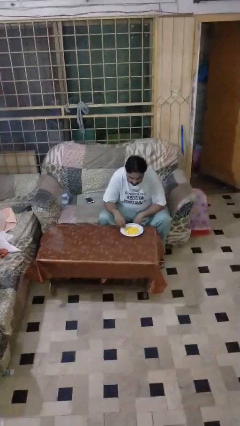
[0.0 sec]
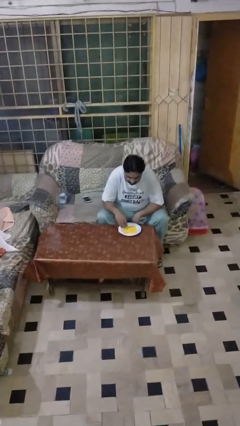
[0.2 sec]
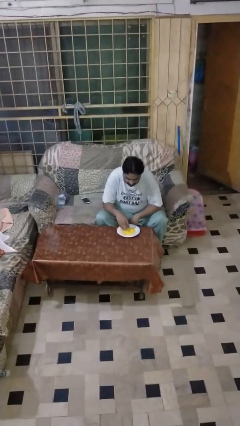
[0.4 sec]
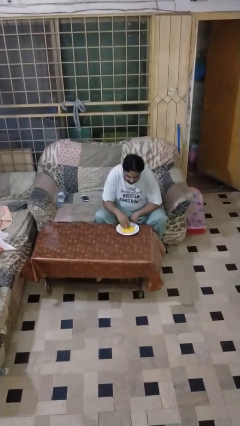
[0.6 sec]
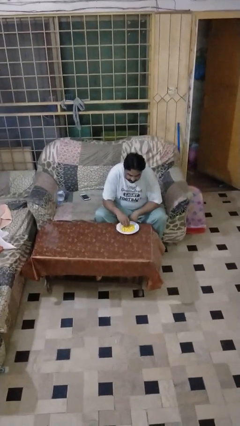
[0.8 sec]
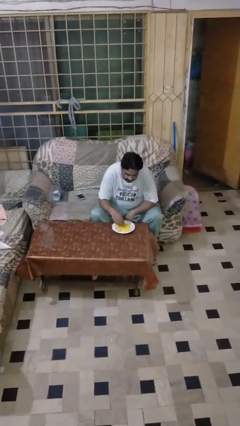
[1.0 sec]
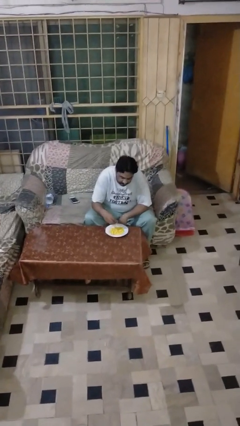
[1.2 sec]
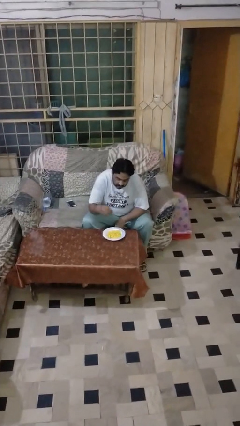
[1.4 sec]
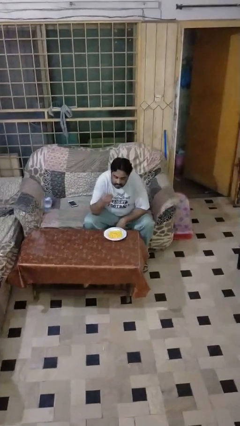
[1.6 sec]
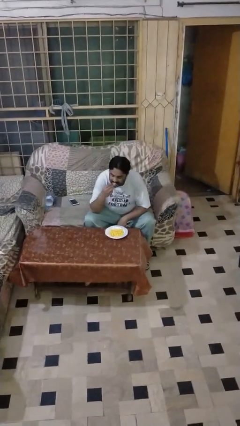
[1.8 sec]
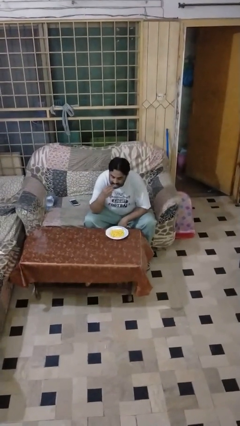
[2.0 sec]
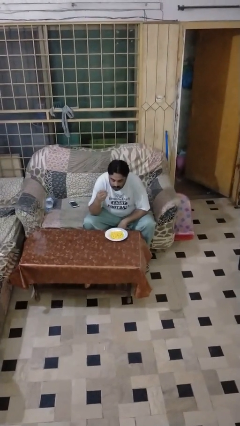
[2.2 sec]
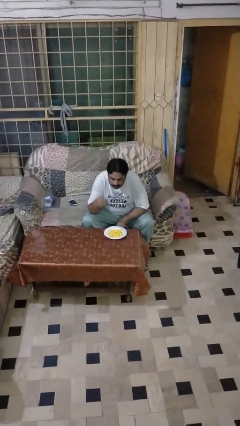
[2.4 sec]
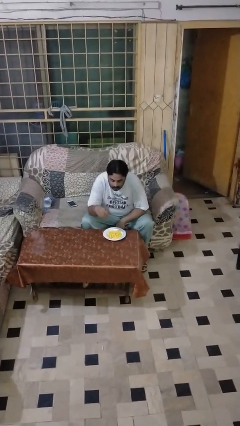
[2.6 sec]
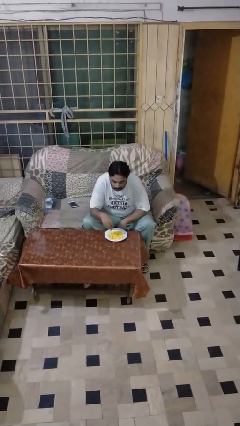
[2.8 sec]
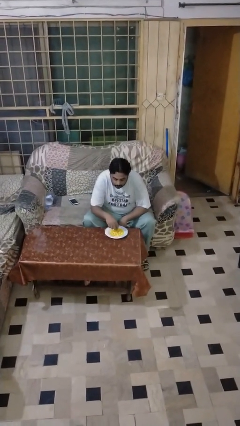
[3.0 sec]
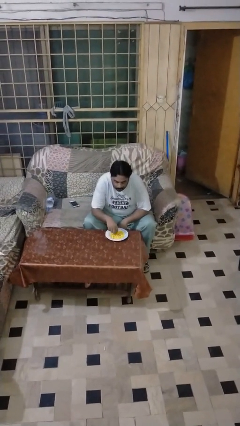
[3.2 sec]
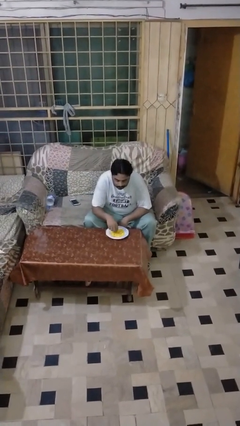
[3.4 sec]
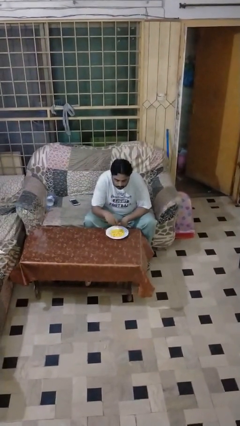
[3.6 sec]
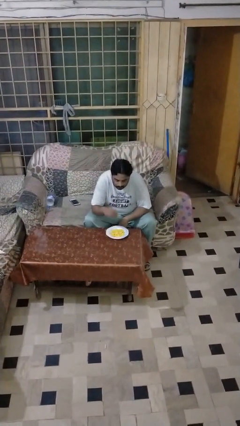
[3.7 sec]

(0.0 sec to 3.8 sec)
person eats with hands

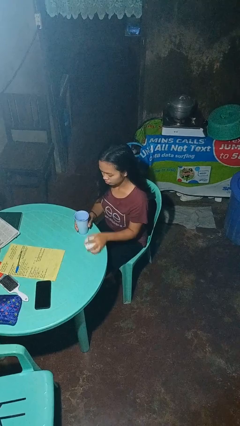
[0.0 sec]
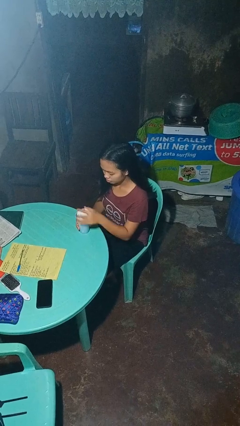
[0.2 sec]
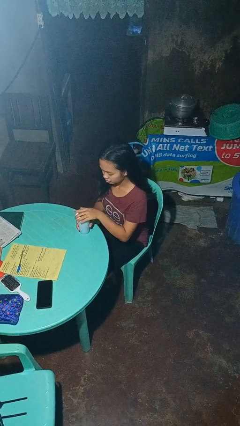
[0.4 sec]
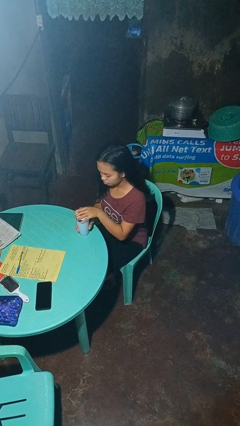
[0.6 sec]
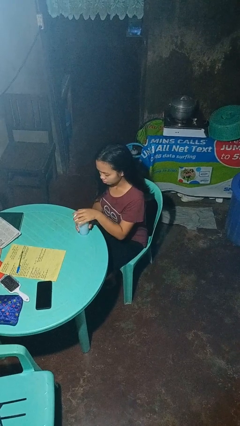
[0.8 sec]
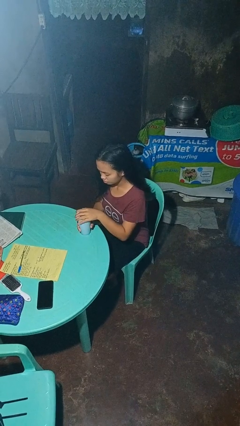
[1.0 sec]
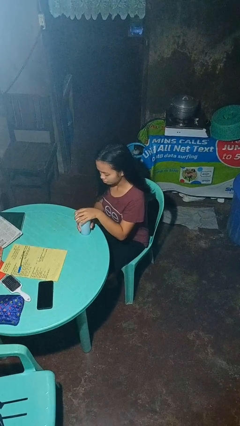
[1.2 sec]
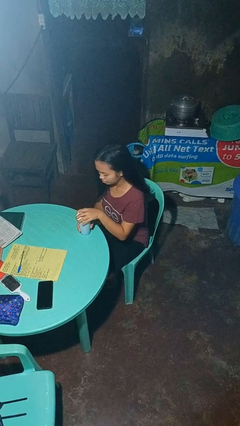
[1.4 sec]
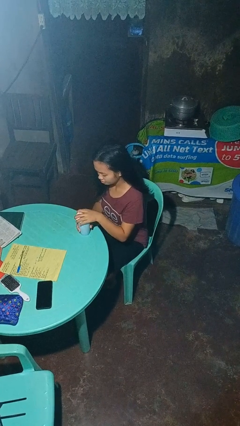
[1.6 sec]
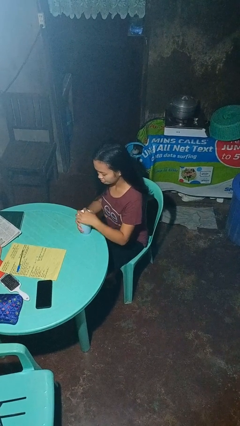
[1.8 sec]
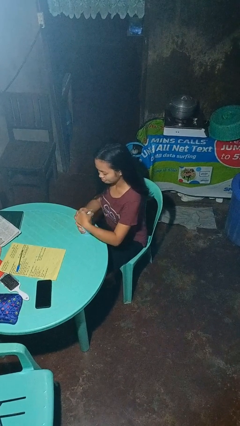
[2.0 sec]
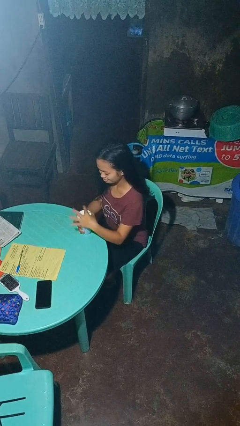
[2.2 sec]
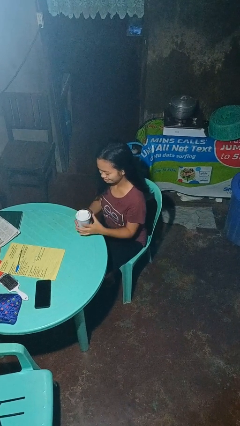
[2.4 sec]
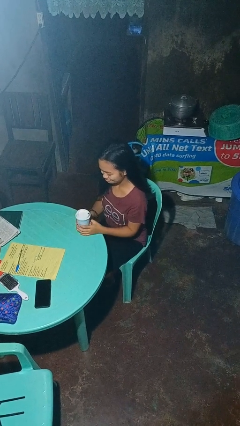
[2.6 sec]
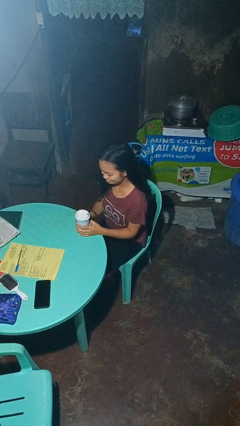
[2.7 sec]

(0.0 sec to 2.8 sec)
person screws lid to bottle

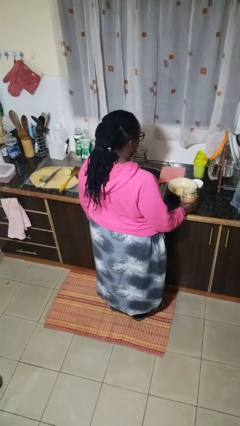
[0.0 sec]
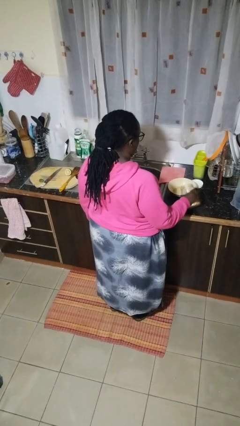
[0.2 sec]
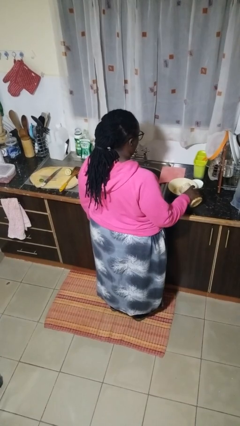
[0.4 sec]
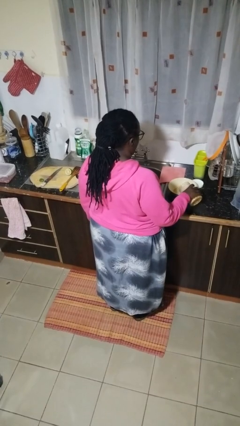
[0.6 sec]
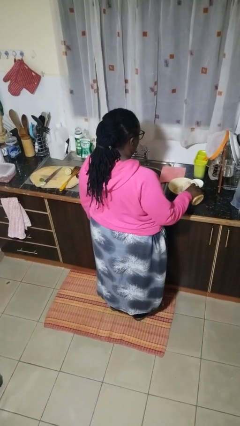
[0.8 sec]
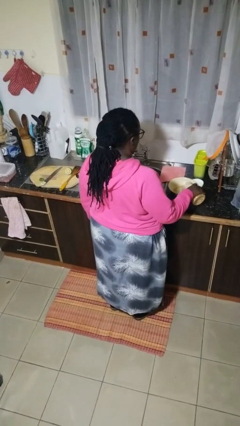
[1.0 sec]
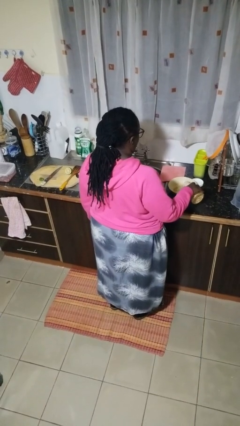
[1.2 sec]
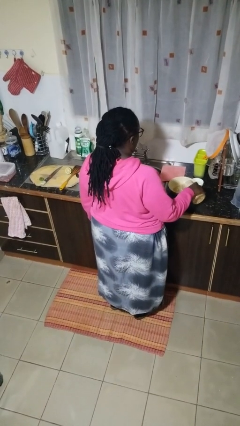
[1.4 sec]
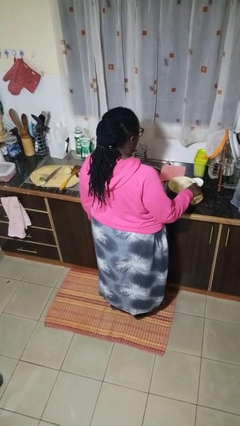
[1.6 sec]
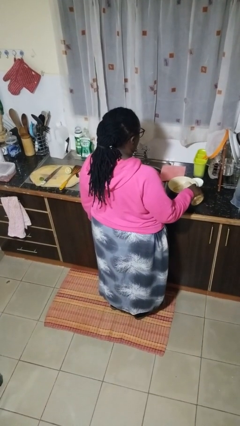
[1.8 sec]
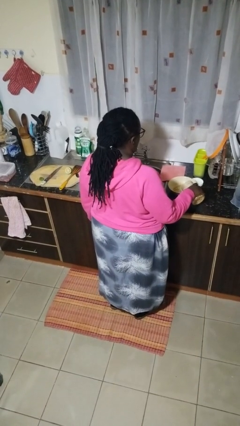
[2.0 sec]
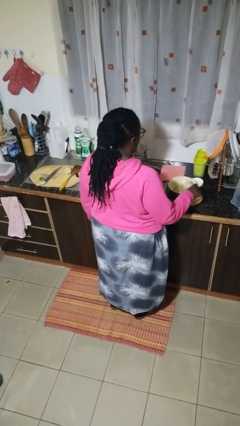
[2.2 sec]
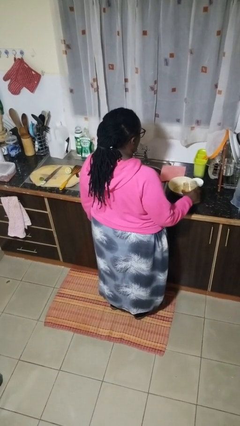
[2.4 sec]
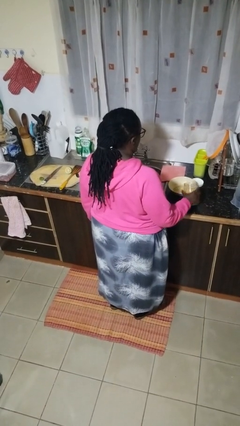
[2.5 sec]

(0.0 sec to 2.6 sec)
person pours into bowl

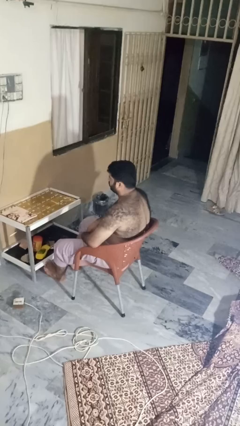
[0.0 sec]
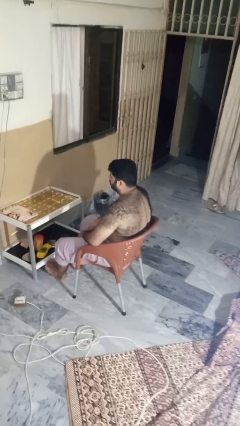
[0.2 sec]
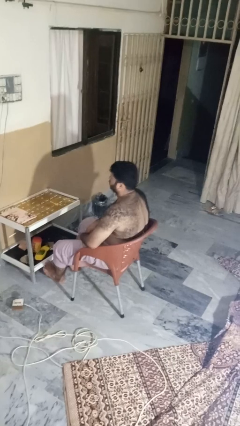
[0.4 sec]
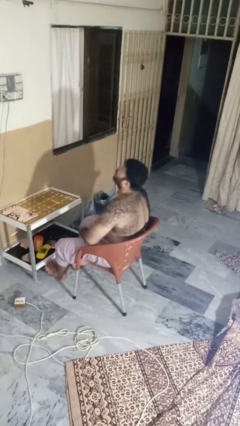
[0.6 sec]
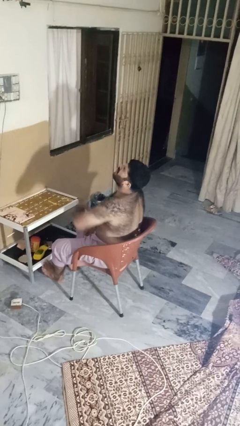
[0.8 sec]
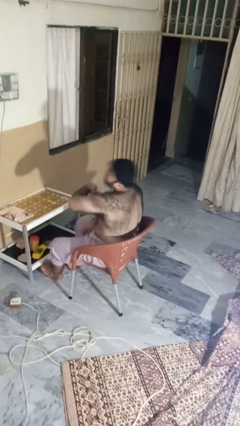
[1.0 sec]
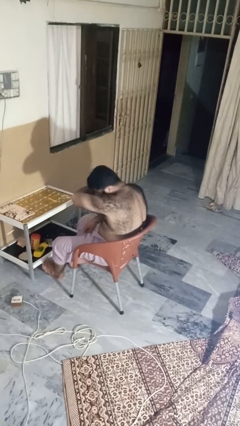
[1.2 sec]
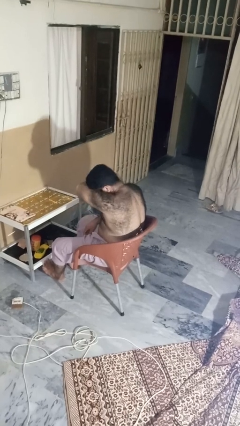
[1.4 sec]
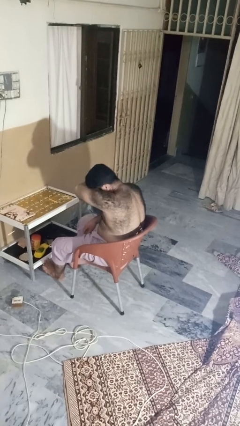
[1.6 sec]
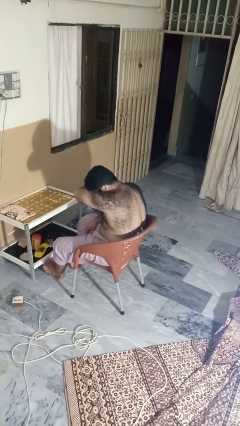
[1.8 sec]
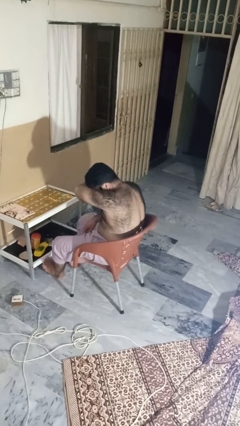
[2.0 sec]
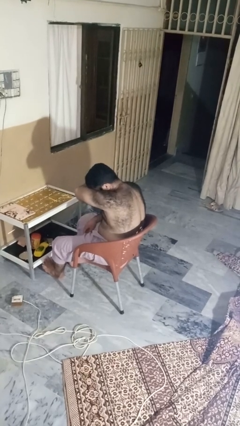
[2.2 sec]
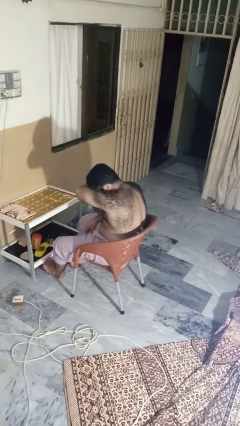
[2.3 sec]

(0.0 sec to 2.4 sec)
person sneezes into arm

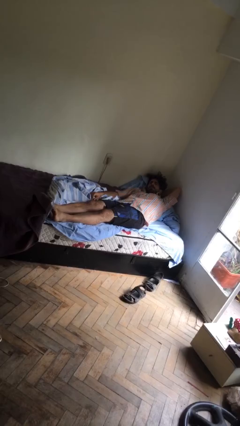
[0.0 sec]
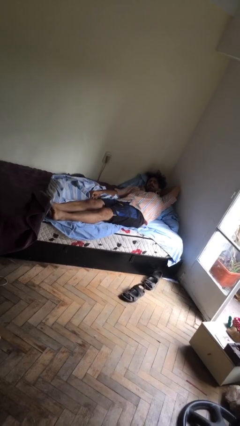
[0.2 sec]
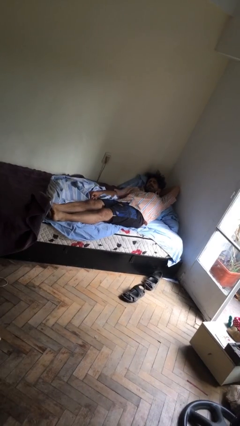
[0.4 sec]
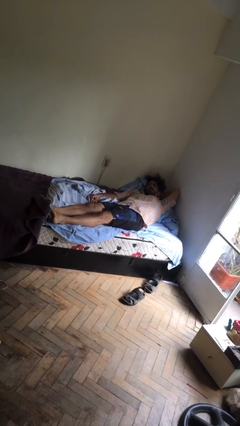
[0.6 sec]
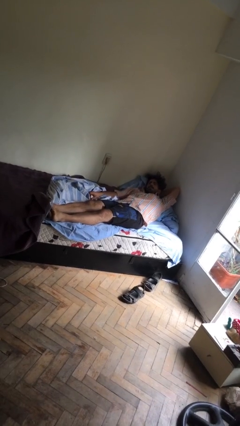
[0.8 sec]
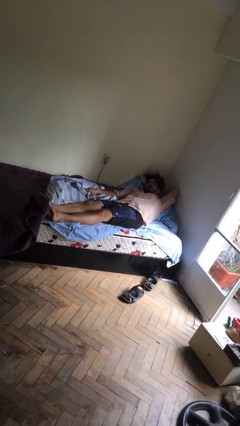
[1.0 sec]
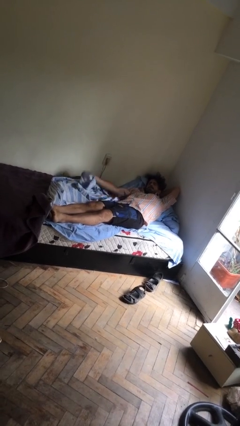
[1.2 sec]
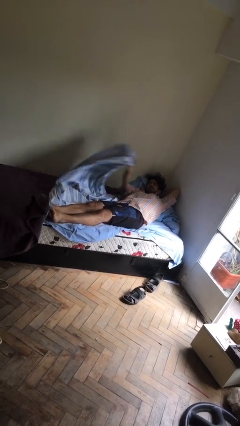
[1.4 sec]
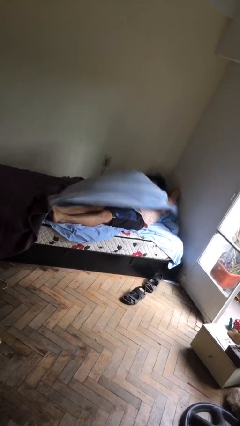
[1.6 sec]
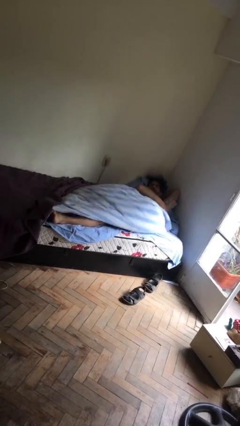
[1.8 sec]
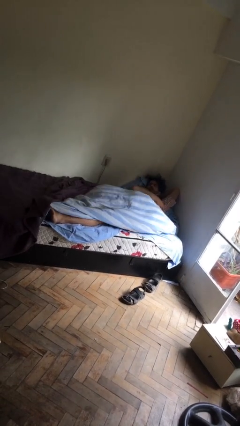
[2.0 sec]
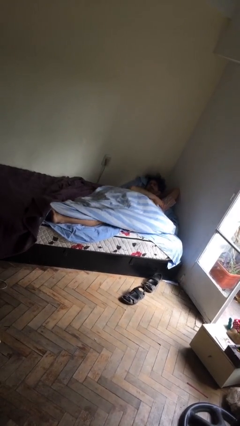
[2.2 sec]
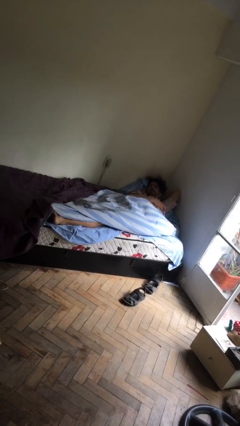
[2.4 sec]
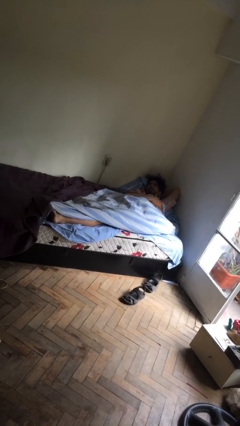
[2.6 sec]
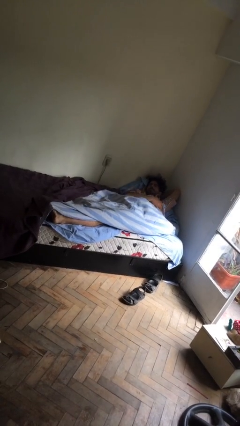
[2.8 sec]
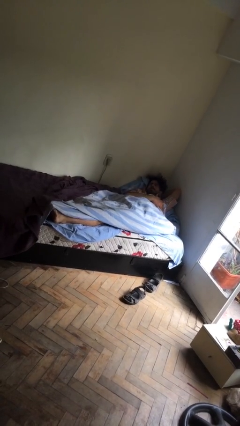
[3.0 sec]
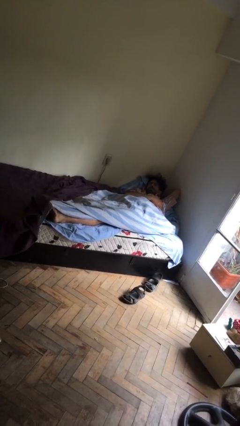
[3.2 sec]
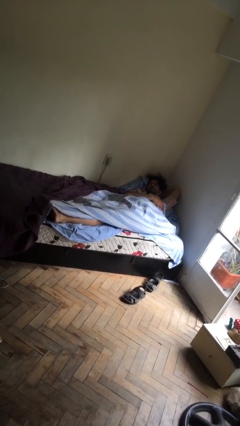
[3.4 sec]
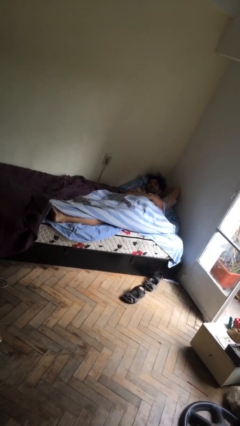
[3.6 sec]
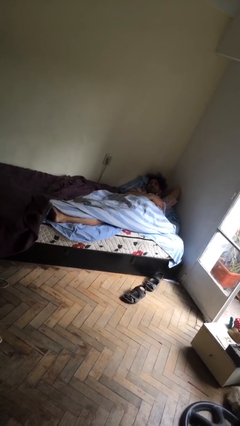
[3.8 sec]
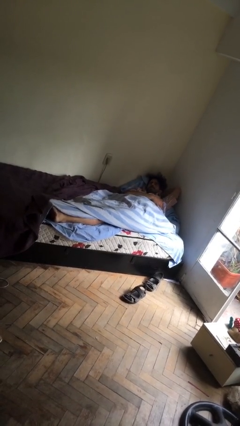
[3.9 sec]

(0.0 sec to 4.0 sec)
person covers with bedsheets

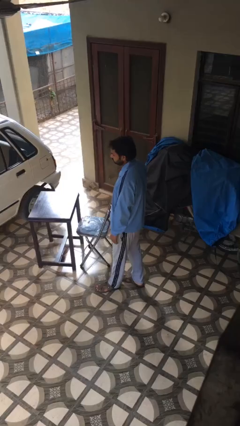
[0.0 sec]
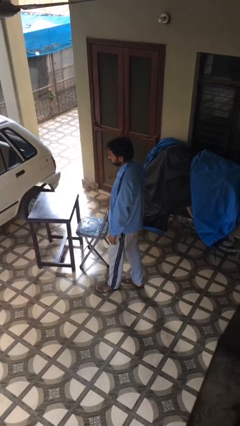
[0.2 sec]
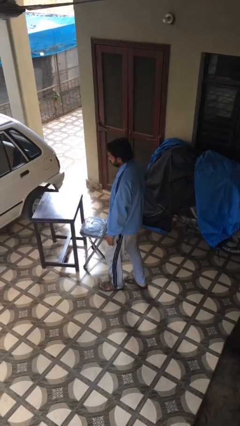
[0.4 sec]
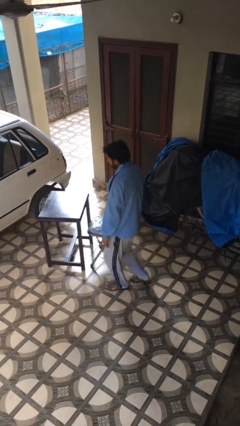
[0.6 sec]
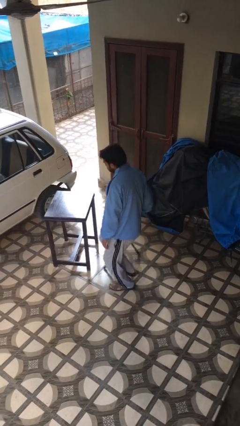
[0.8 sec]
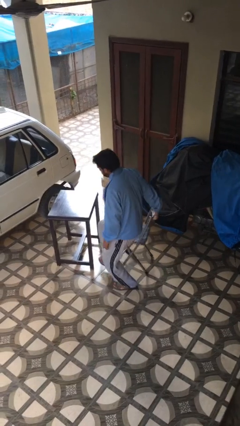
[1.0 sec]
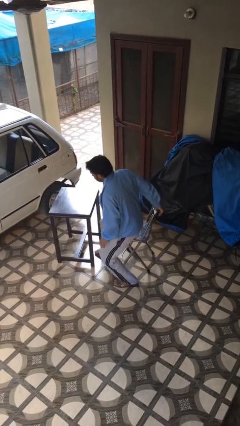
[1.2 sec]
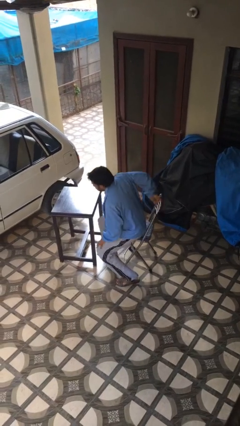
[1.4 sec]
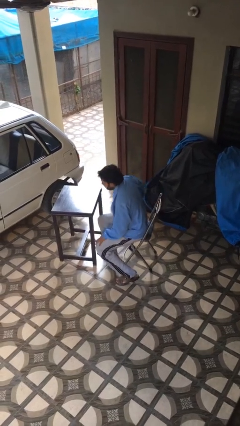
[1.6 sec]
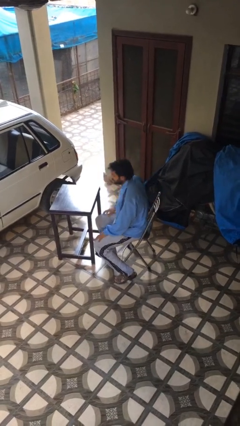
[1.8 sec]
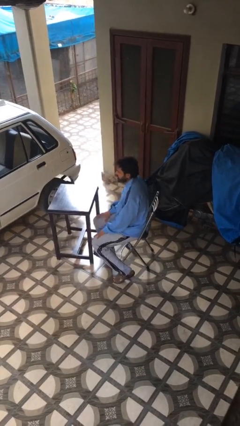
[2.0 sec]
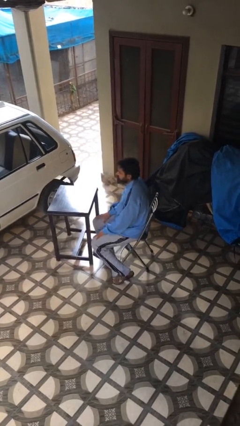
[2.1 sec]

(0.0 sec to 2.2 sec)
person sits down
